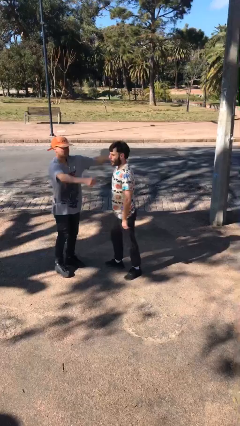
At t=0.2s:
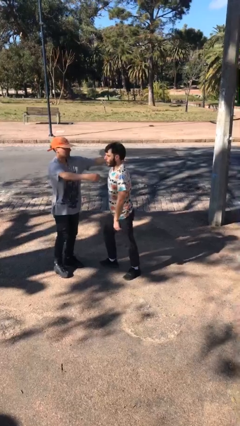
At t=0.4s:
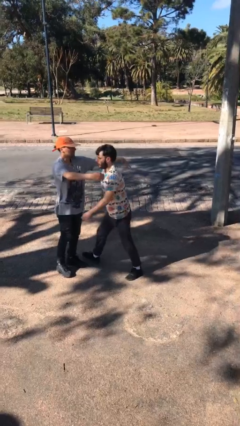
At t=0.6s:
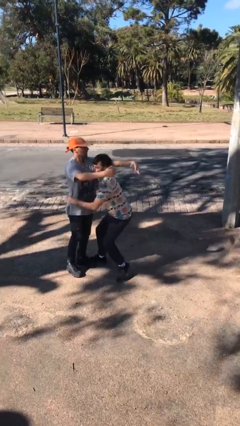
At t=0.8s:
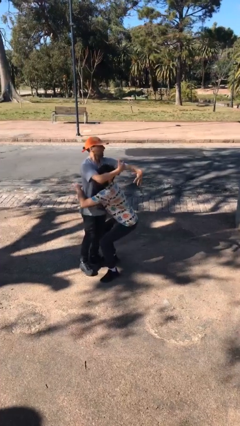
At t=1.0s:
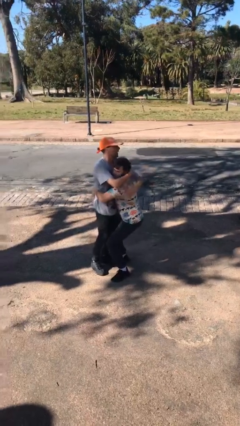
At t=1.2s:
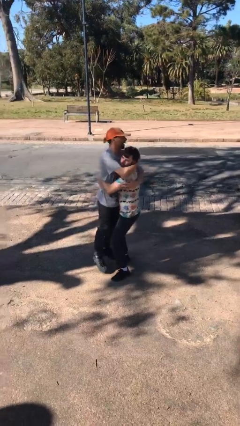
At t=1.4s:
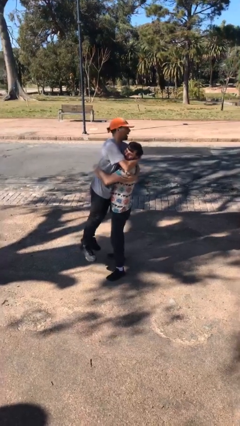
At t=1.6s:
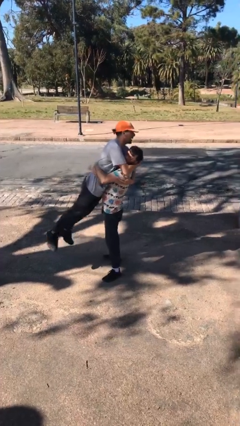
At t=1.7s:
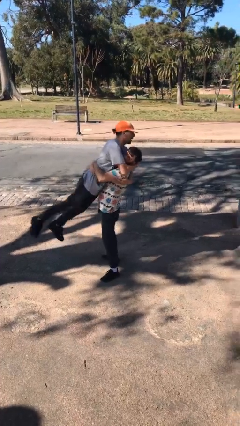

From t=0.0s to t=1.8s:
person picks up person

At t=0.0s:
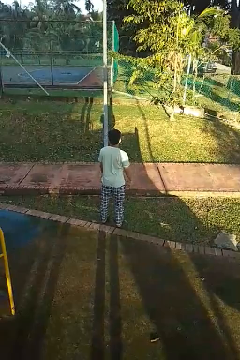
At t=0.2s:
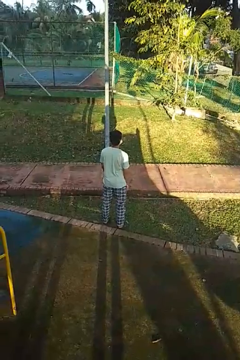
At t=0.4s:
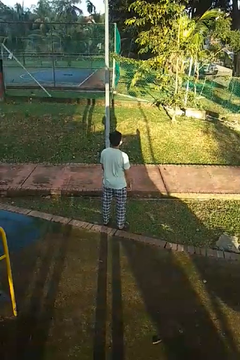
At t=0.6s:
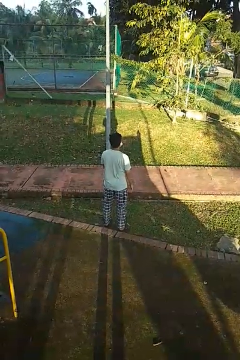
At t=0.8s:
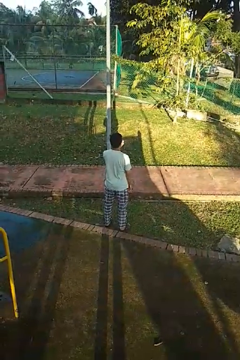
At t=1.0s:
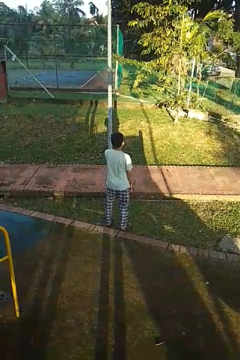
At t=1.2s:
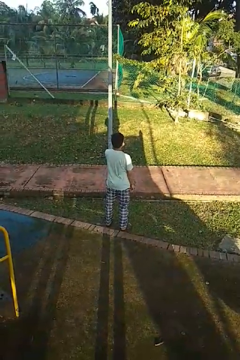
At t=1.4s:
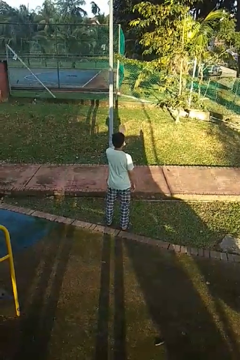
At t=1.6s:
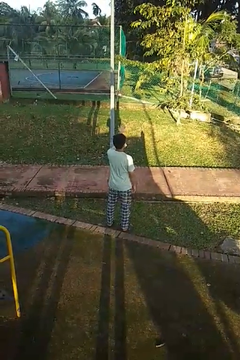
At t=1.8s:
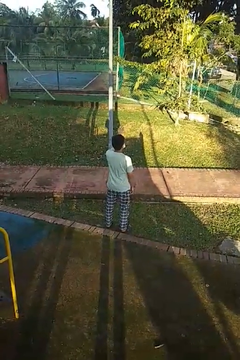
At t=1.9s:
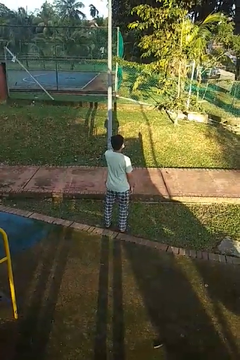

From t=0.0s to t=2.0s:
person gestures blow kiss

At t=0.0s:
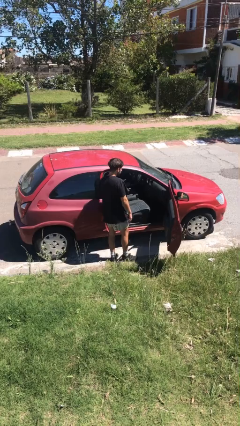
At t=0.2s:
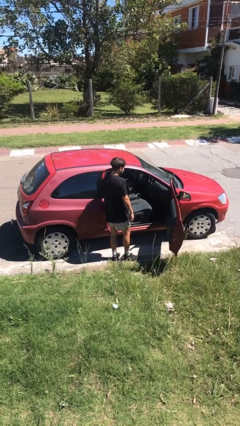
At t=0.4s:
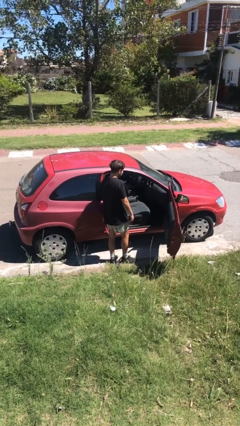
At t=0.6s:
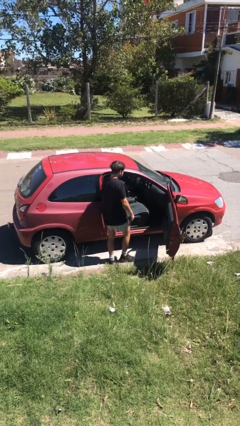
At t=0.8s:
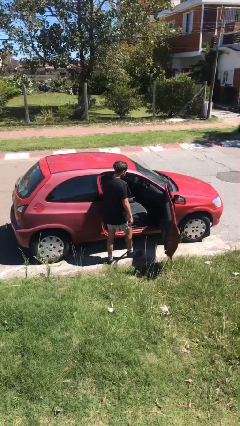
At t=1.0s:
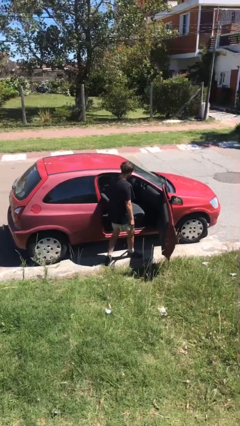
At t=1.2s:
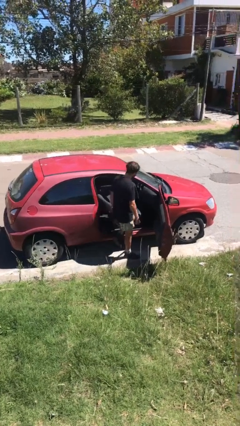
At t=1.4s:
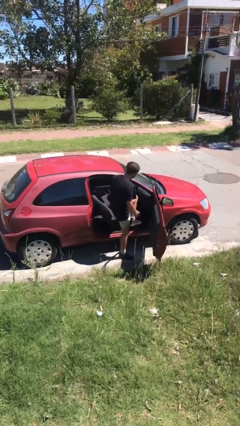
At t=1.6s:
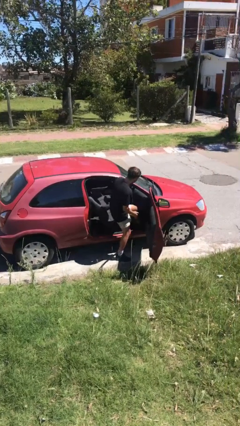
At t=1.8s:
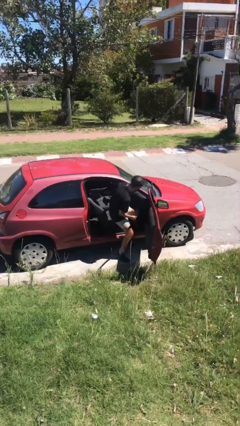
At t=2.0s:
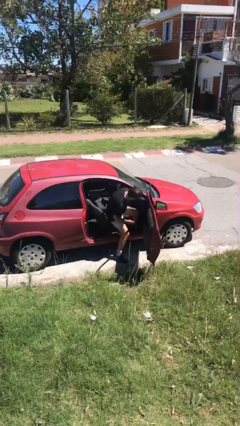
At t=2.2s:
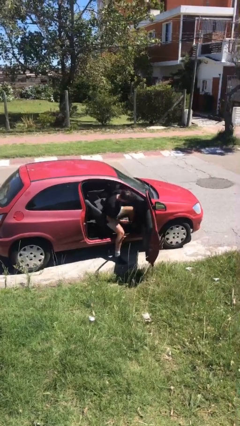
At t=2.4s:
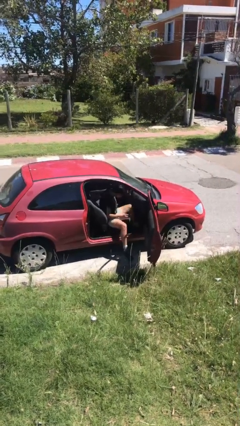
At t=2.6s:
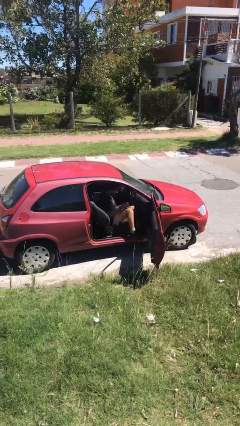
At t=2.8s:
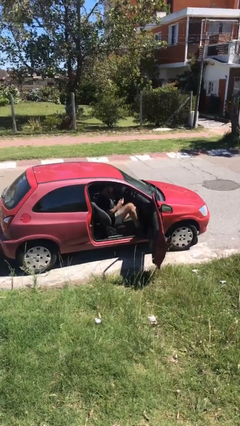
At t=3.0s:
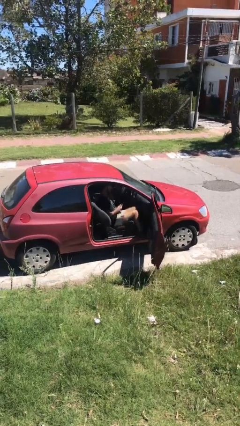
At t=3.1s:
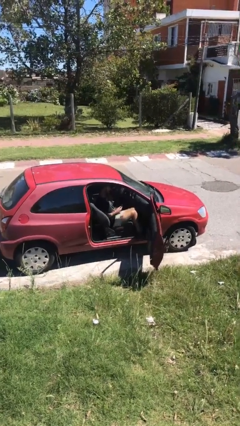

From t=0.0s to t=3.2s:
person enters car

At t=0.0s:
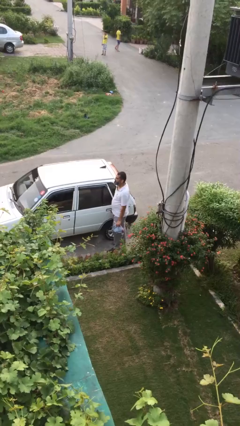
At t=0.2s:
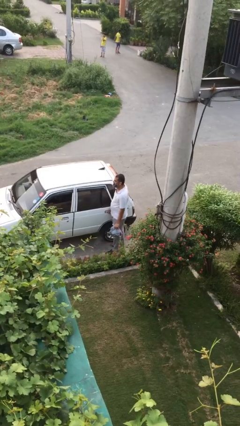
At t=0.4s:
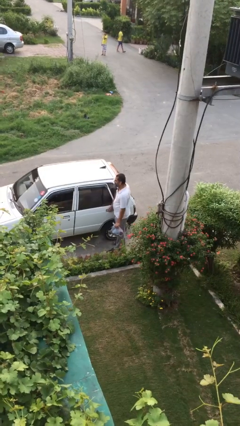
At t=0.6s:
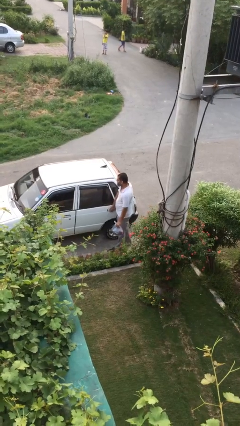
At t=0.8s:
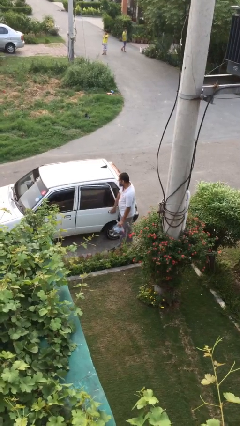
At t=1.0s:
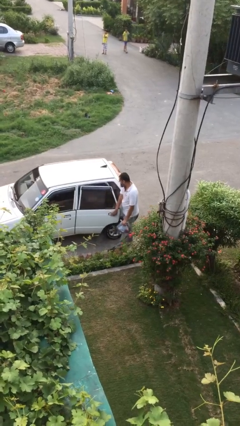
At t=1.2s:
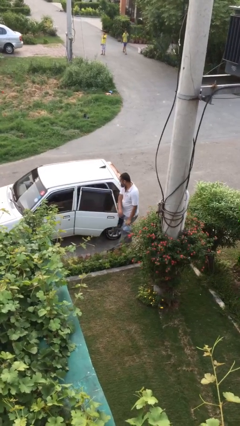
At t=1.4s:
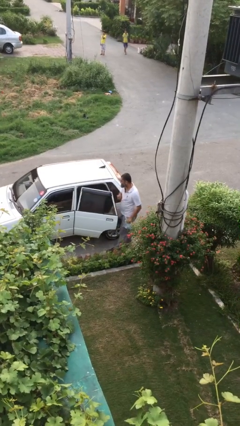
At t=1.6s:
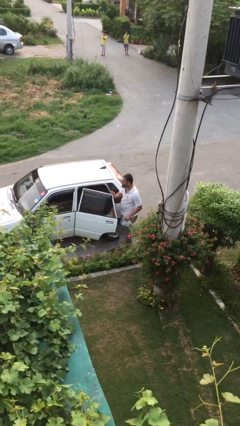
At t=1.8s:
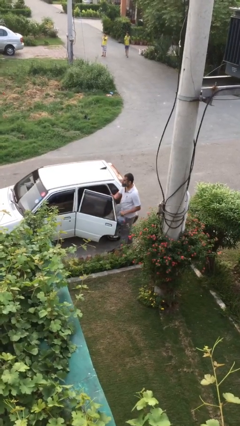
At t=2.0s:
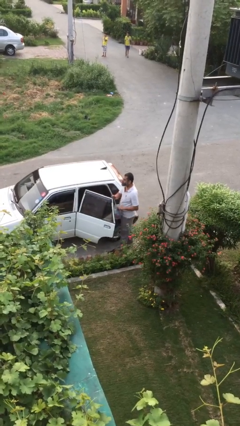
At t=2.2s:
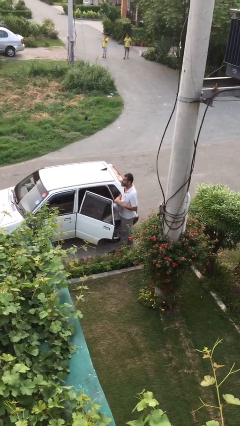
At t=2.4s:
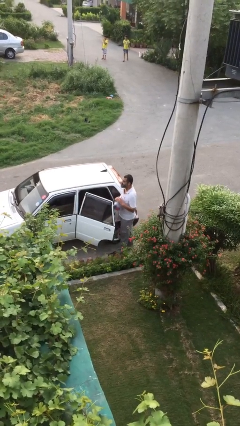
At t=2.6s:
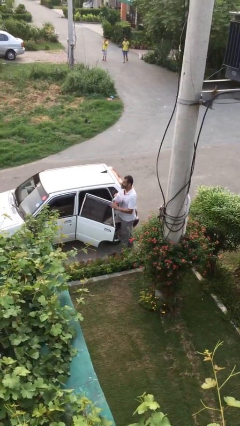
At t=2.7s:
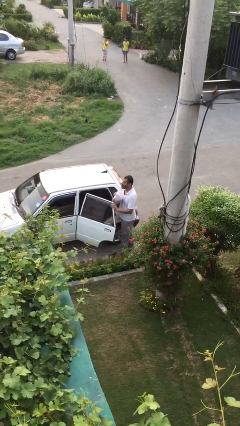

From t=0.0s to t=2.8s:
person opens car door

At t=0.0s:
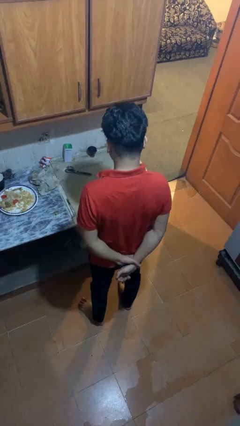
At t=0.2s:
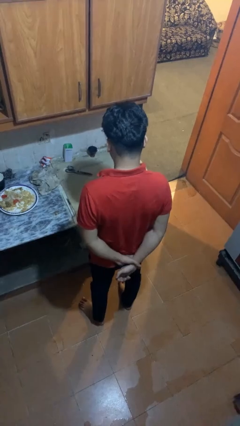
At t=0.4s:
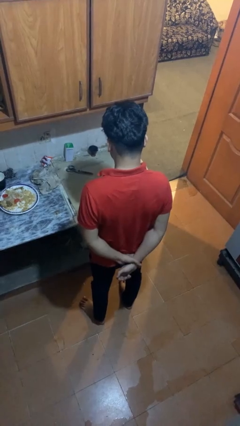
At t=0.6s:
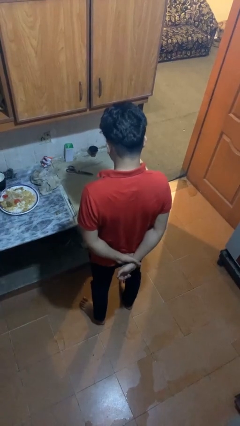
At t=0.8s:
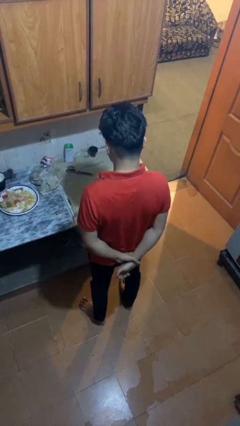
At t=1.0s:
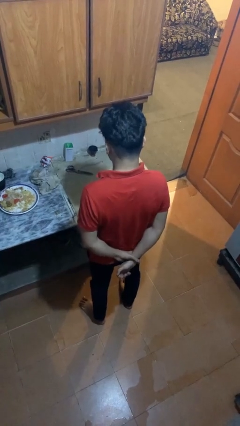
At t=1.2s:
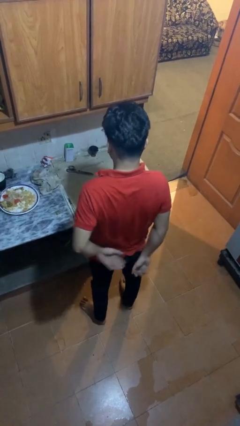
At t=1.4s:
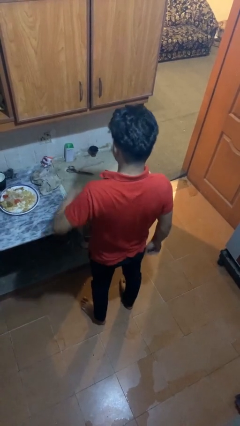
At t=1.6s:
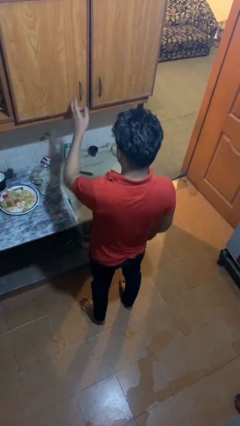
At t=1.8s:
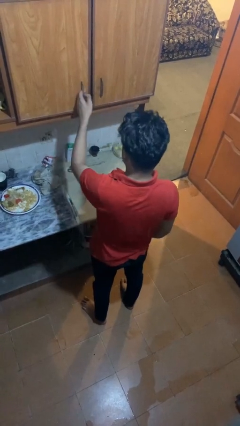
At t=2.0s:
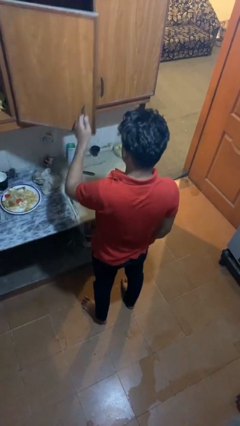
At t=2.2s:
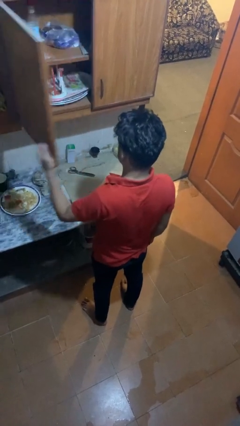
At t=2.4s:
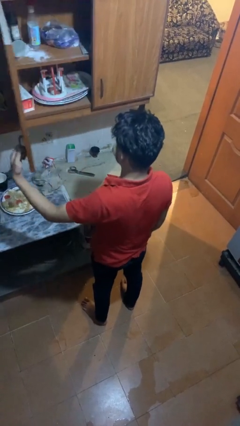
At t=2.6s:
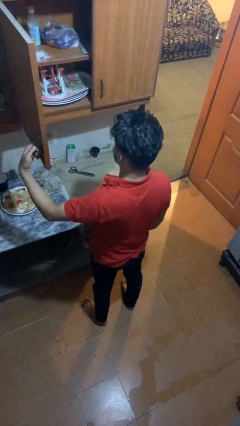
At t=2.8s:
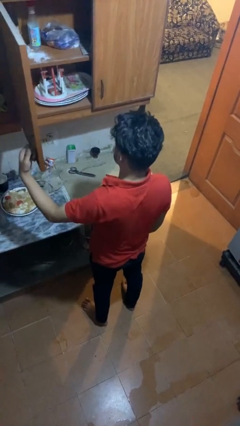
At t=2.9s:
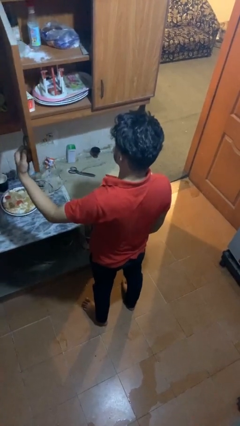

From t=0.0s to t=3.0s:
person opens cabinet

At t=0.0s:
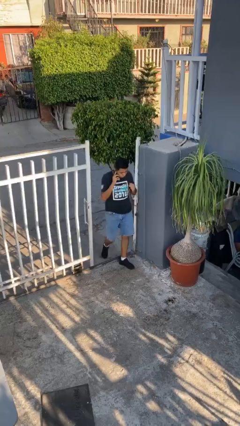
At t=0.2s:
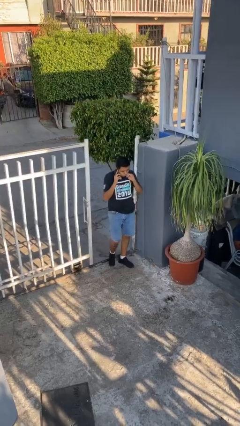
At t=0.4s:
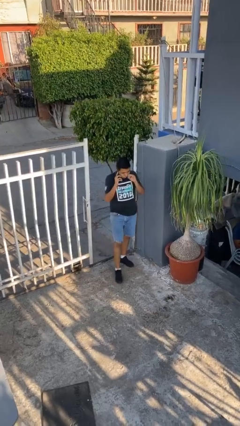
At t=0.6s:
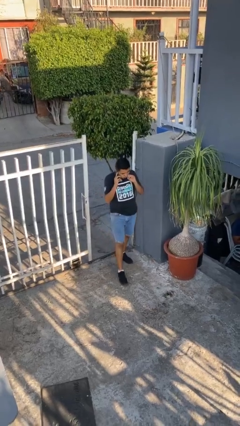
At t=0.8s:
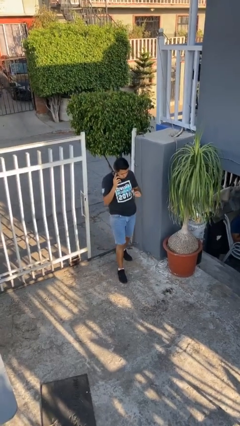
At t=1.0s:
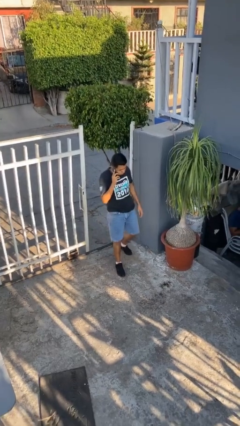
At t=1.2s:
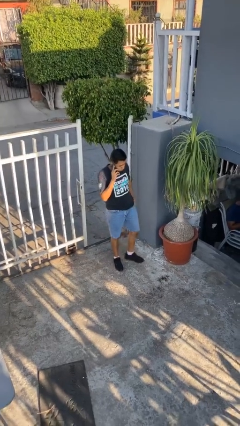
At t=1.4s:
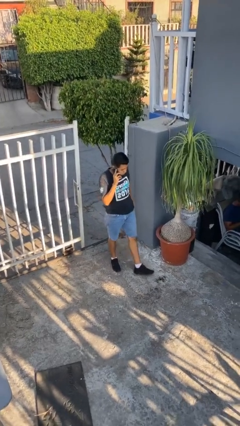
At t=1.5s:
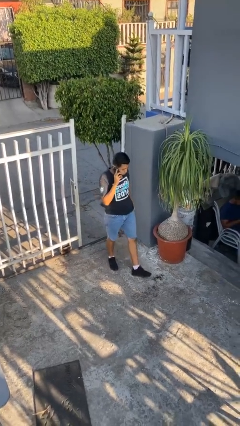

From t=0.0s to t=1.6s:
person enters scene through structure

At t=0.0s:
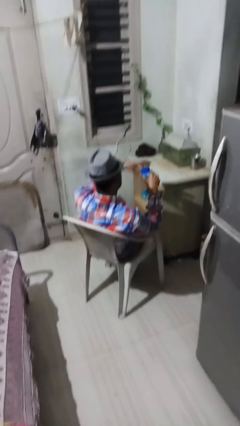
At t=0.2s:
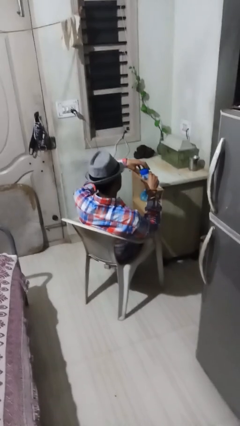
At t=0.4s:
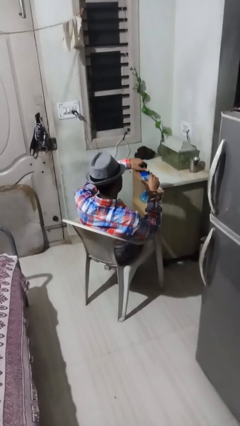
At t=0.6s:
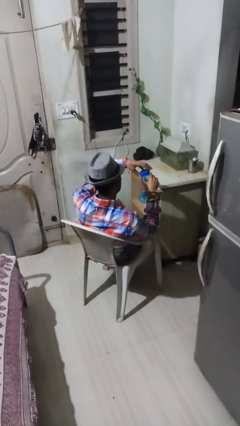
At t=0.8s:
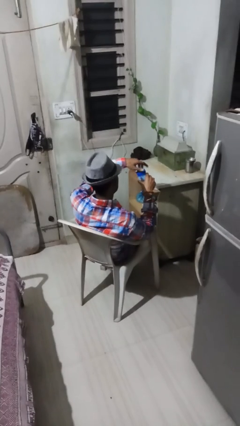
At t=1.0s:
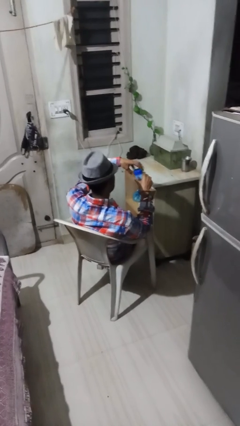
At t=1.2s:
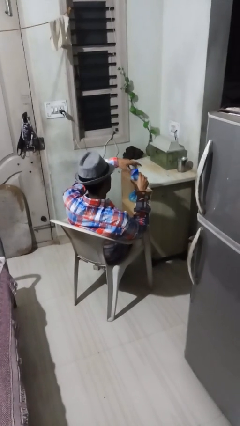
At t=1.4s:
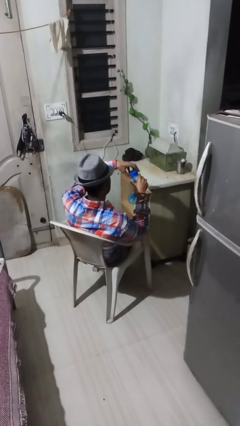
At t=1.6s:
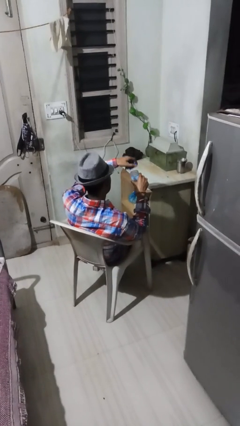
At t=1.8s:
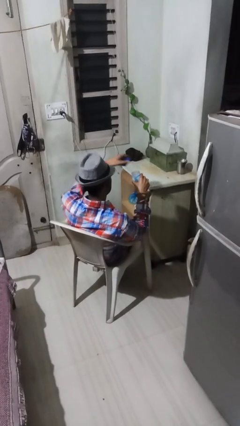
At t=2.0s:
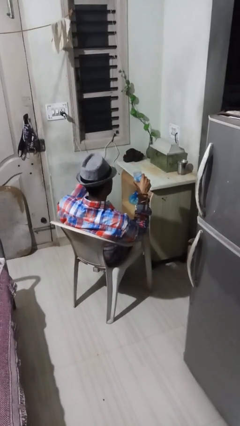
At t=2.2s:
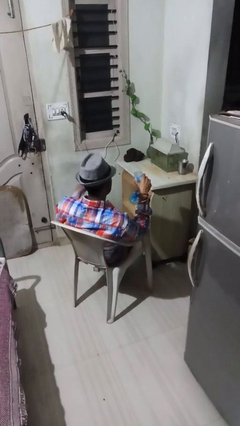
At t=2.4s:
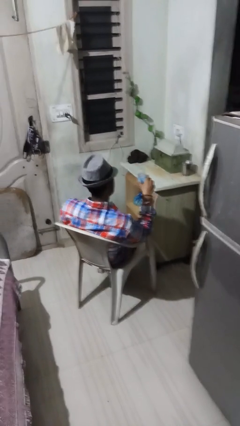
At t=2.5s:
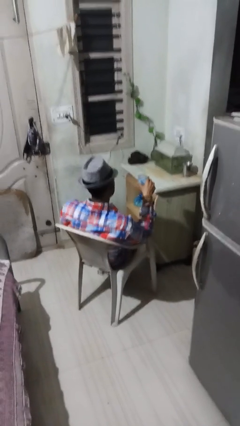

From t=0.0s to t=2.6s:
person opens jar

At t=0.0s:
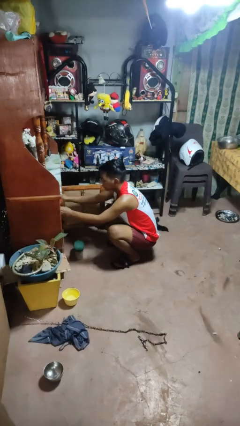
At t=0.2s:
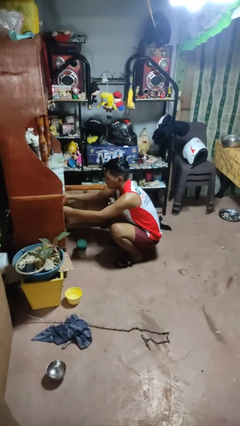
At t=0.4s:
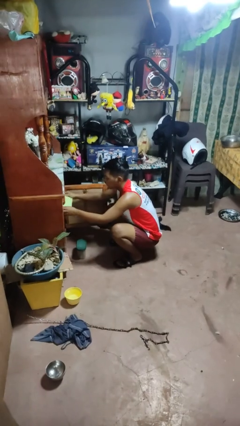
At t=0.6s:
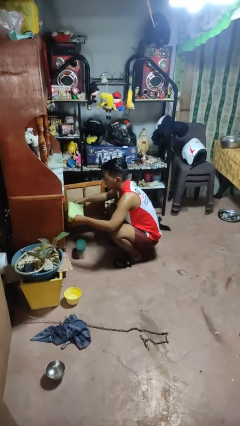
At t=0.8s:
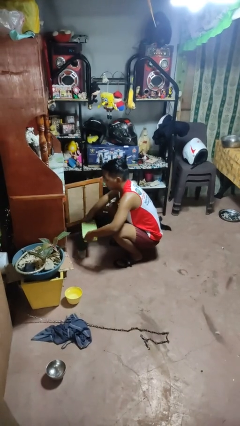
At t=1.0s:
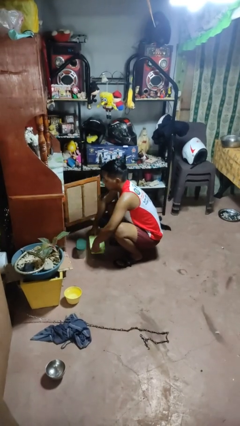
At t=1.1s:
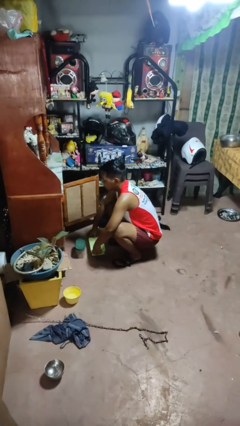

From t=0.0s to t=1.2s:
person takes object from cabinet
